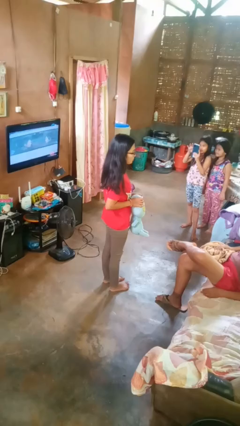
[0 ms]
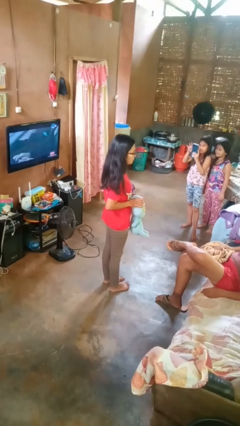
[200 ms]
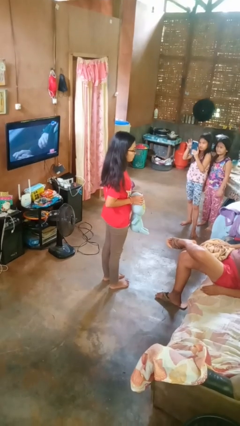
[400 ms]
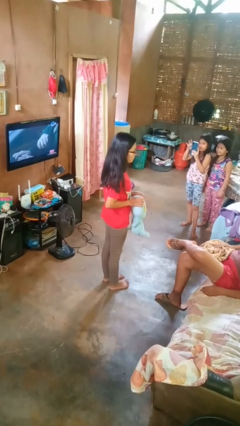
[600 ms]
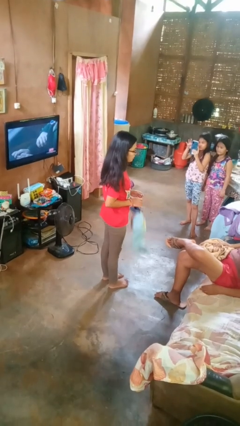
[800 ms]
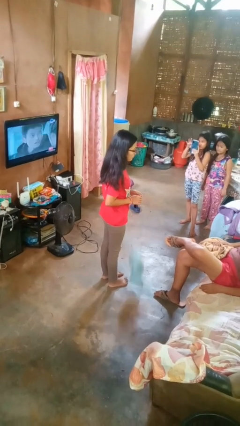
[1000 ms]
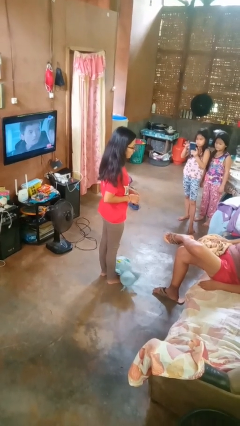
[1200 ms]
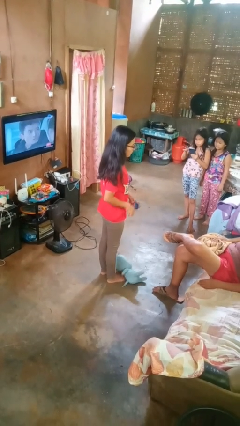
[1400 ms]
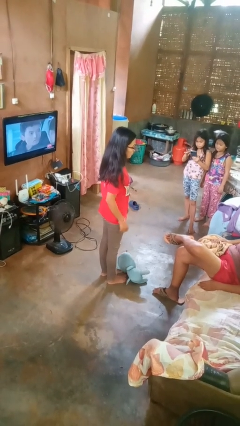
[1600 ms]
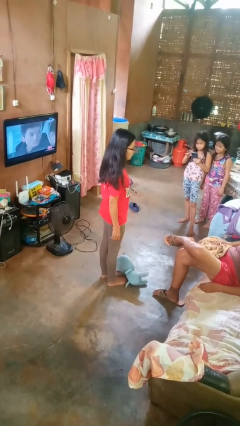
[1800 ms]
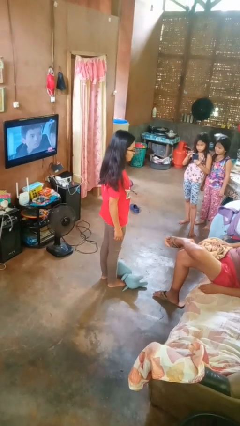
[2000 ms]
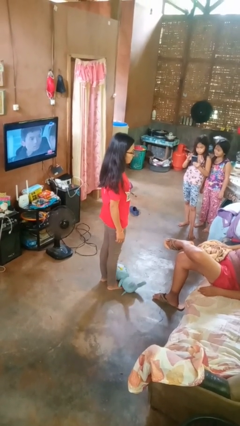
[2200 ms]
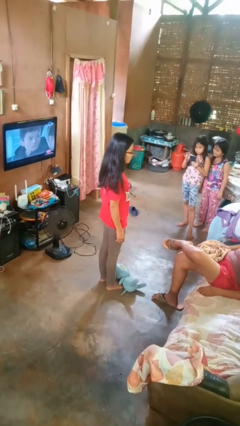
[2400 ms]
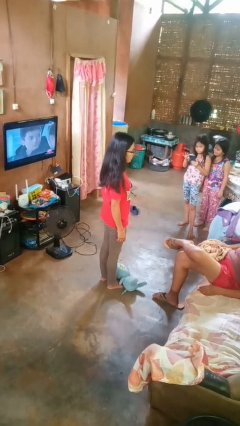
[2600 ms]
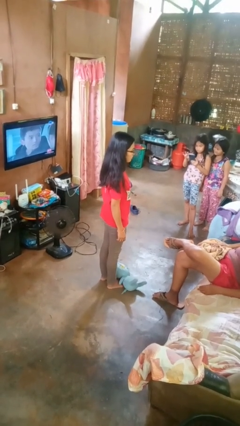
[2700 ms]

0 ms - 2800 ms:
person drops object

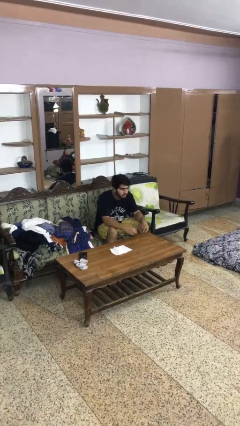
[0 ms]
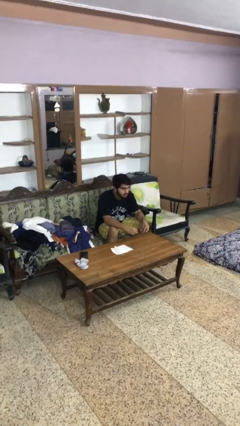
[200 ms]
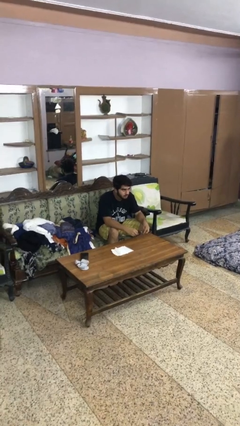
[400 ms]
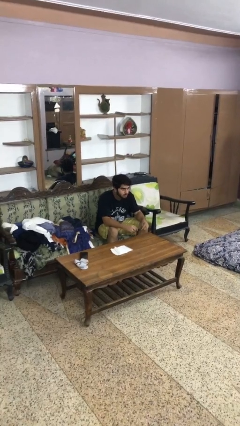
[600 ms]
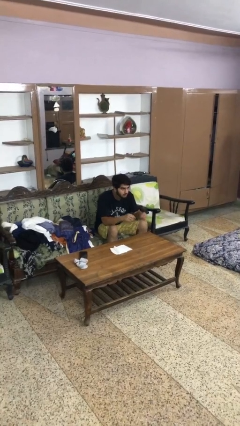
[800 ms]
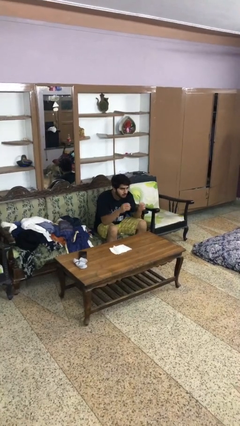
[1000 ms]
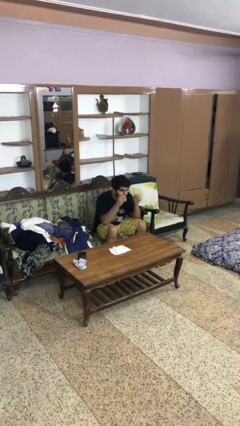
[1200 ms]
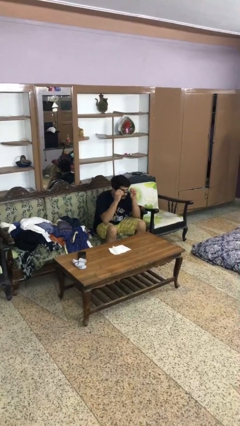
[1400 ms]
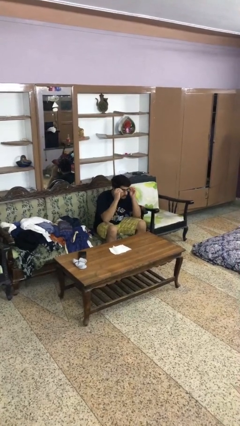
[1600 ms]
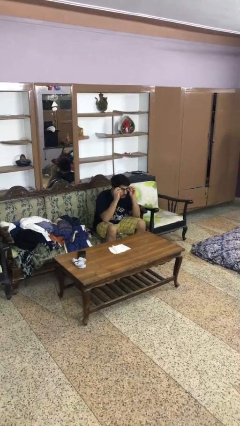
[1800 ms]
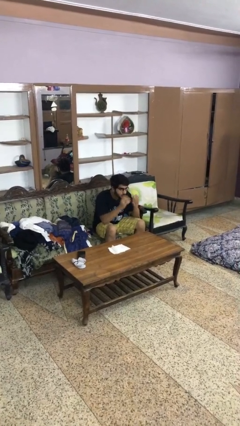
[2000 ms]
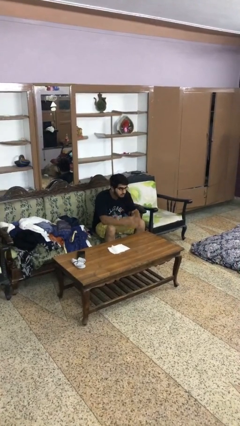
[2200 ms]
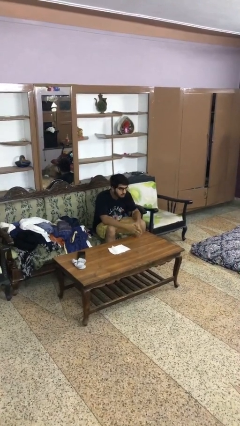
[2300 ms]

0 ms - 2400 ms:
person puts on glasses

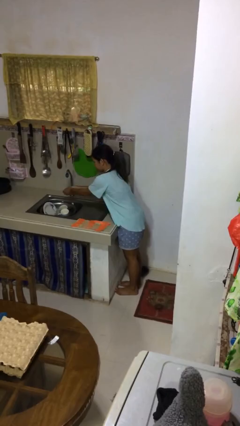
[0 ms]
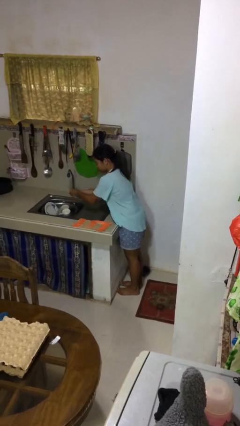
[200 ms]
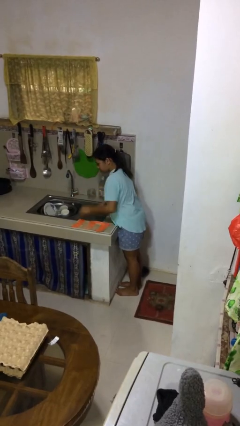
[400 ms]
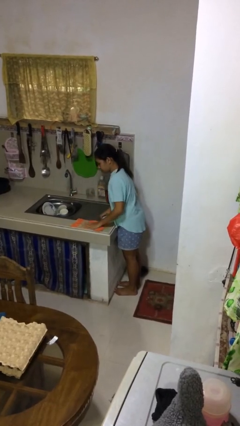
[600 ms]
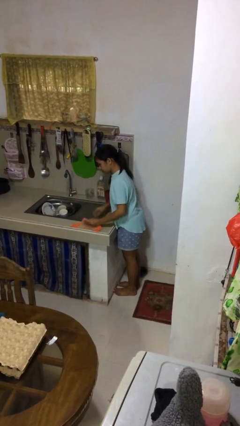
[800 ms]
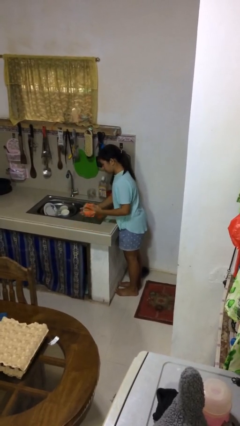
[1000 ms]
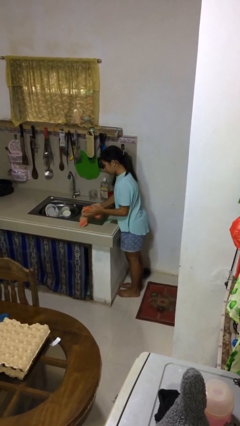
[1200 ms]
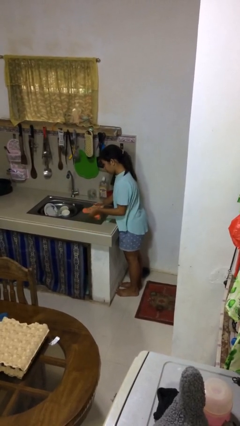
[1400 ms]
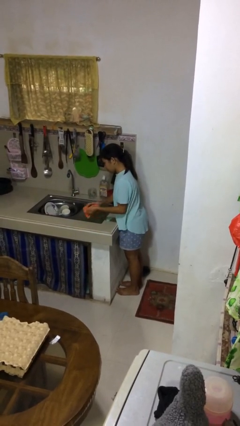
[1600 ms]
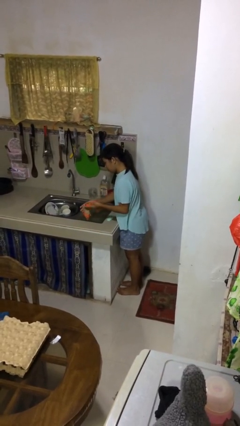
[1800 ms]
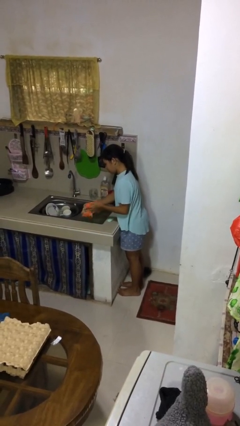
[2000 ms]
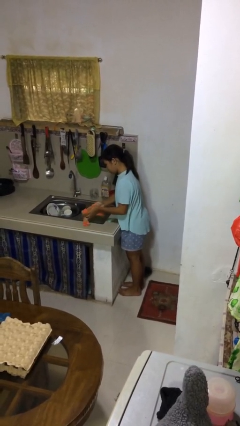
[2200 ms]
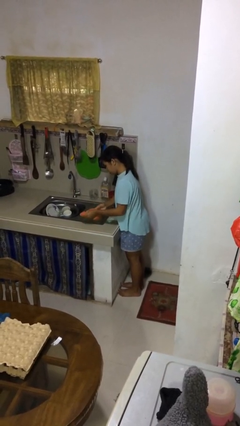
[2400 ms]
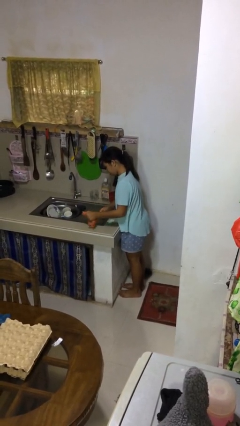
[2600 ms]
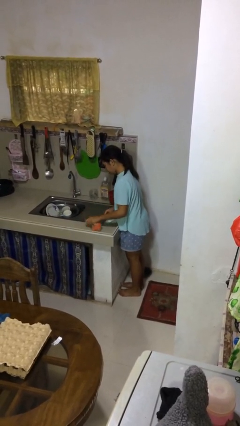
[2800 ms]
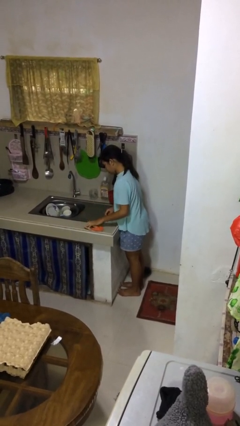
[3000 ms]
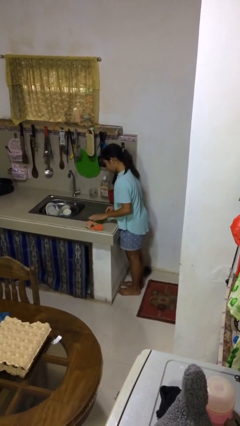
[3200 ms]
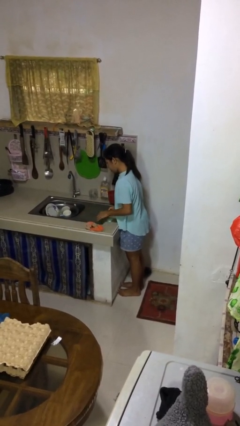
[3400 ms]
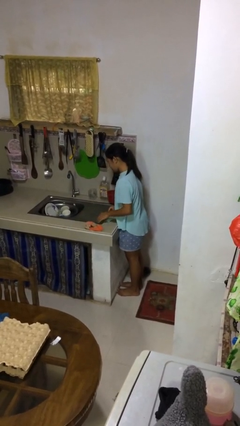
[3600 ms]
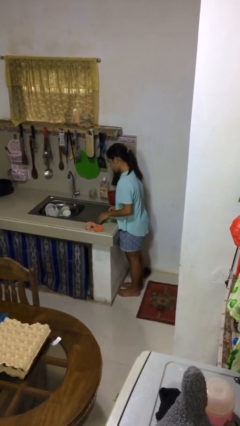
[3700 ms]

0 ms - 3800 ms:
person dries hands with towel

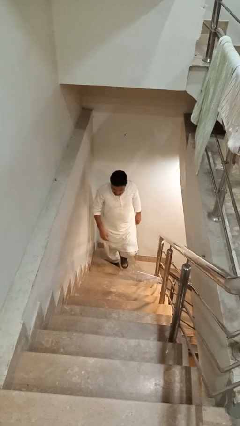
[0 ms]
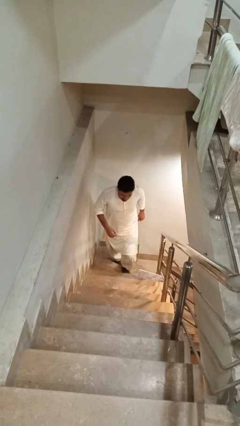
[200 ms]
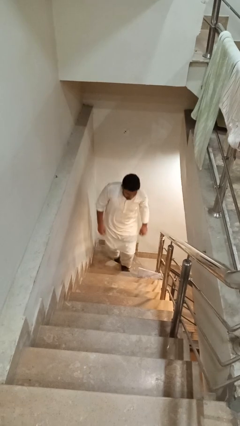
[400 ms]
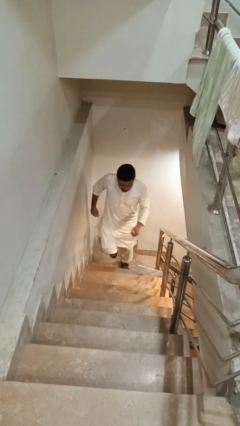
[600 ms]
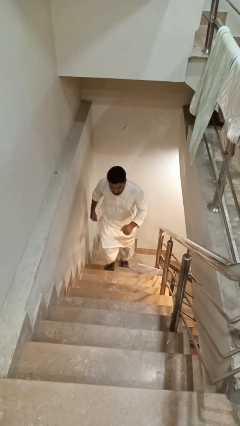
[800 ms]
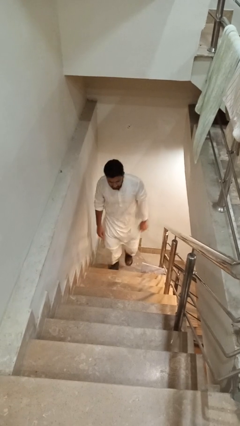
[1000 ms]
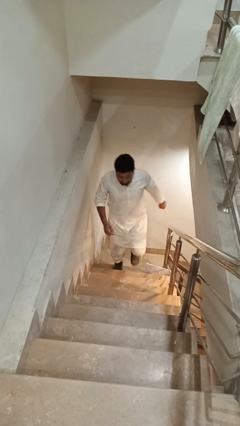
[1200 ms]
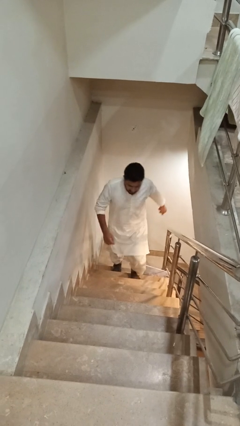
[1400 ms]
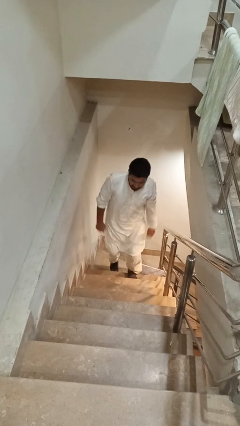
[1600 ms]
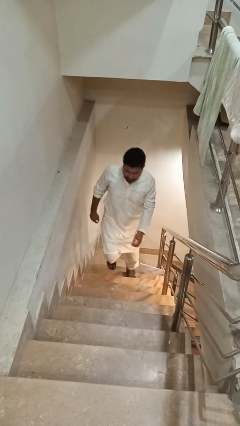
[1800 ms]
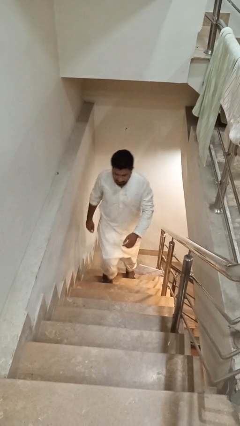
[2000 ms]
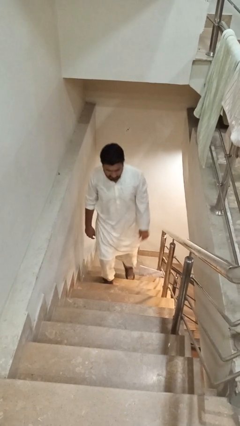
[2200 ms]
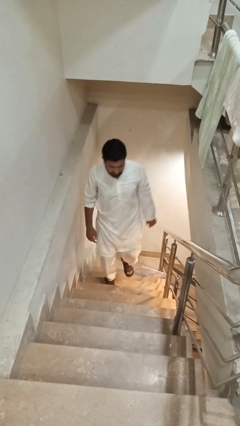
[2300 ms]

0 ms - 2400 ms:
person climbs up stairs

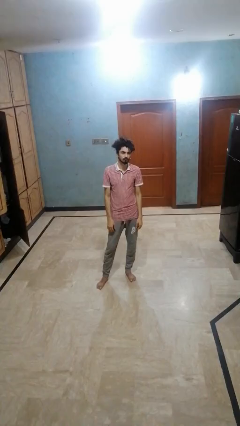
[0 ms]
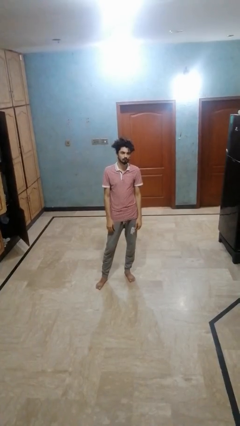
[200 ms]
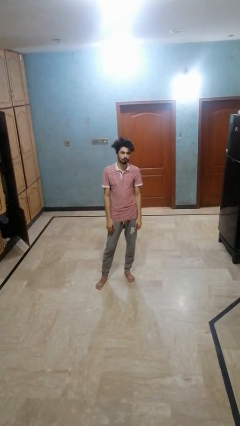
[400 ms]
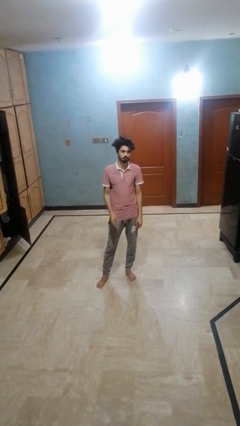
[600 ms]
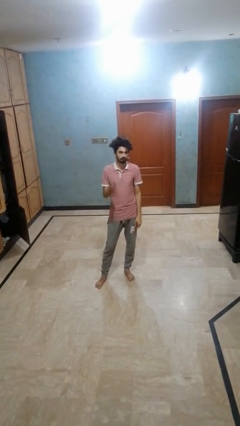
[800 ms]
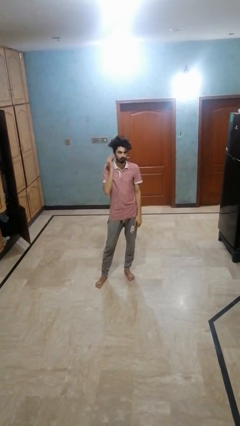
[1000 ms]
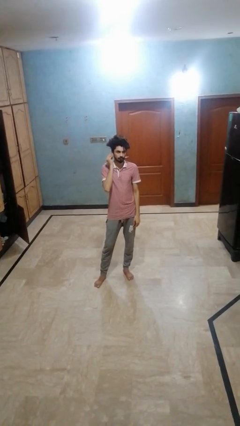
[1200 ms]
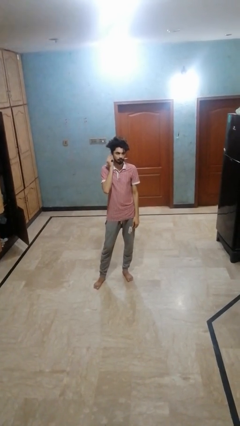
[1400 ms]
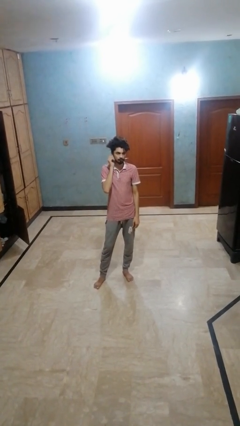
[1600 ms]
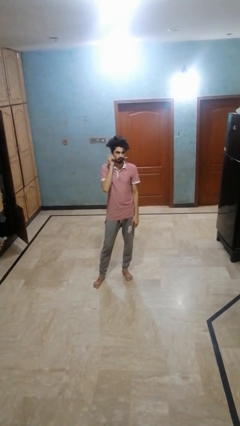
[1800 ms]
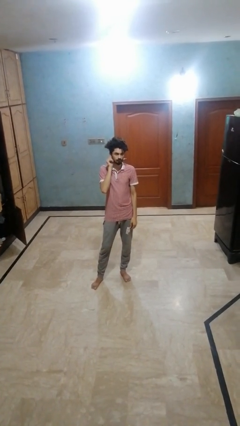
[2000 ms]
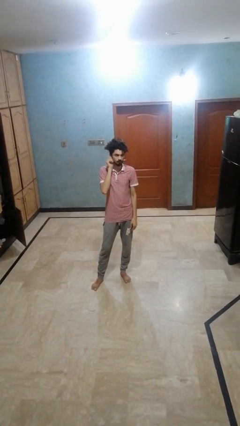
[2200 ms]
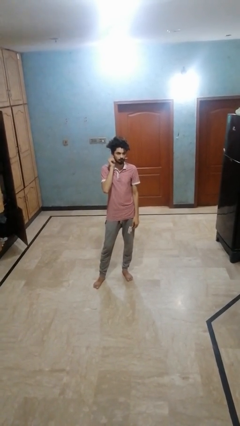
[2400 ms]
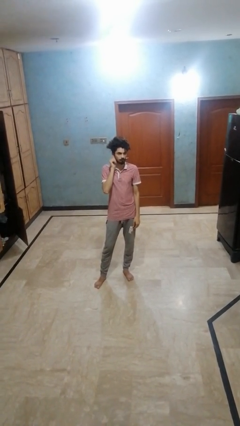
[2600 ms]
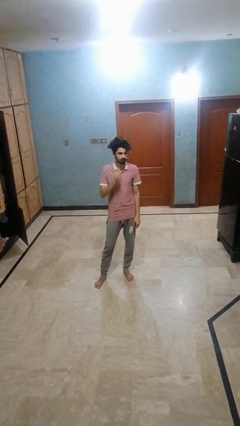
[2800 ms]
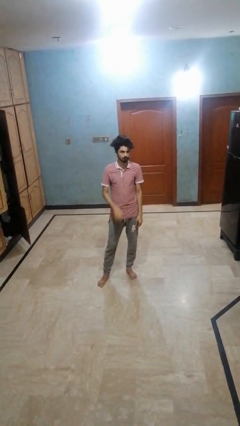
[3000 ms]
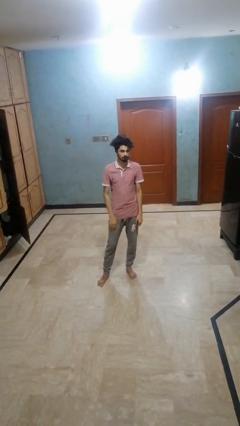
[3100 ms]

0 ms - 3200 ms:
person touches earlobe

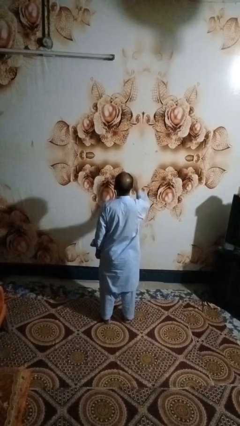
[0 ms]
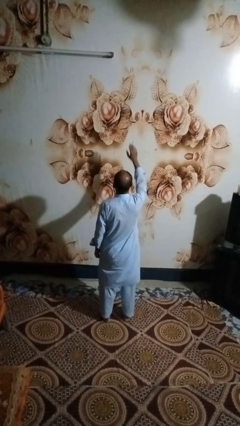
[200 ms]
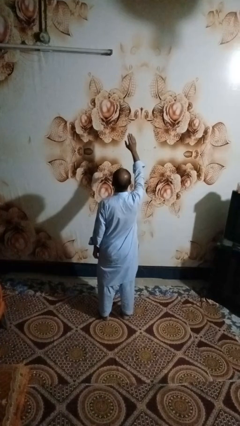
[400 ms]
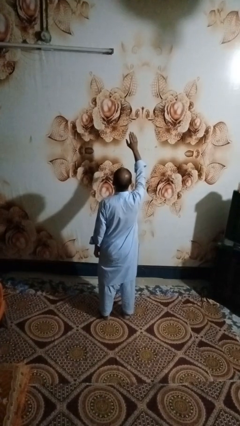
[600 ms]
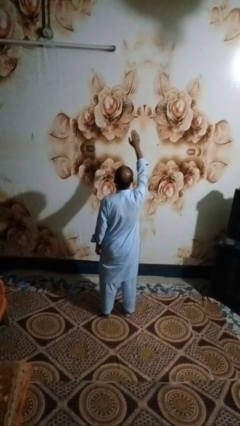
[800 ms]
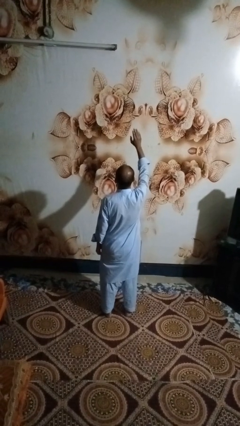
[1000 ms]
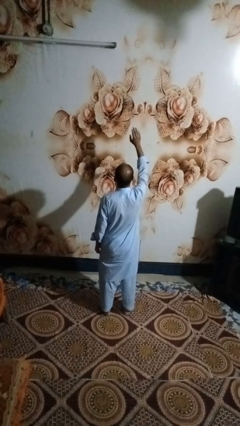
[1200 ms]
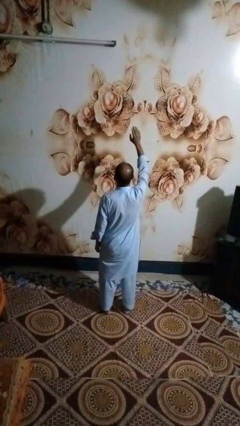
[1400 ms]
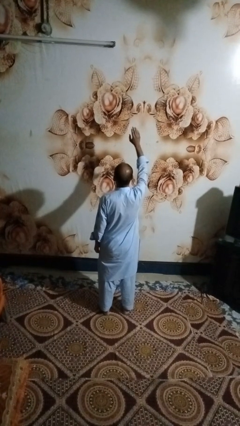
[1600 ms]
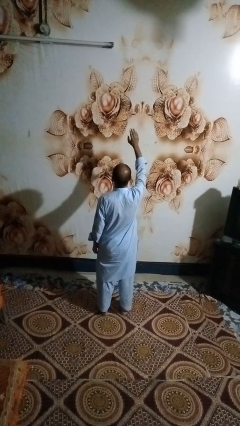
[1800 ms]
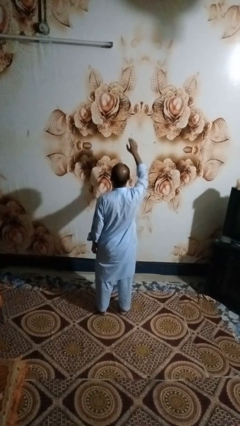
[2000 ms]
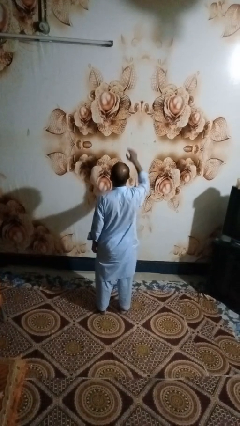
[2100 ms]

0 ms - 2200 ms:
person gestures raise hand

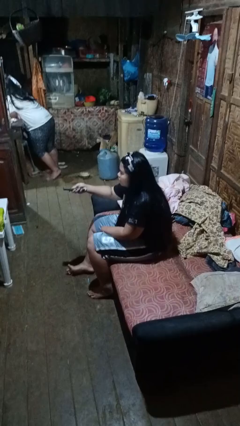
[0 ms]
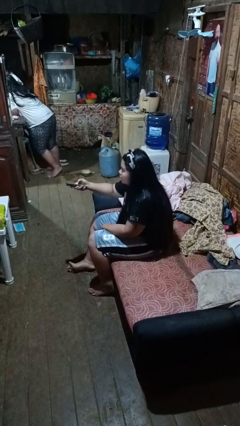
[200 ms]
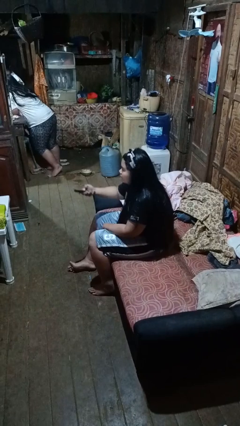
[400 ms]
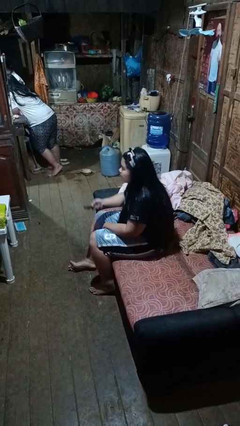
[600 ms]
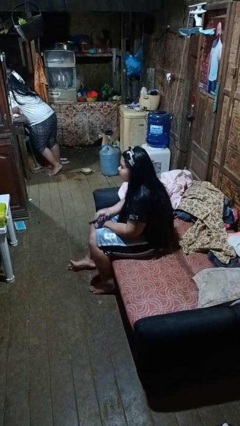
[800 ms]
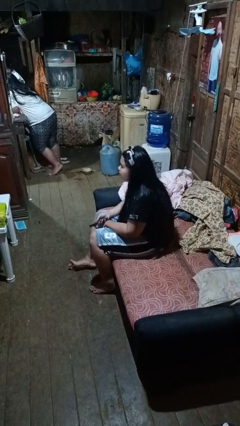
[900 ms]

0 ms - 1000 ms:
person uses television remote
